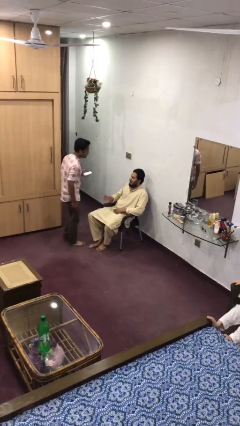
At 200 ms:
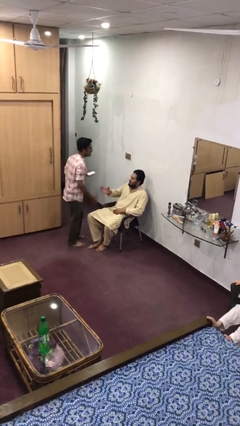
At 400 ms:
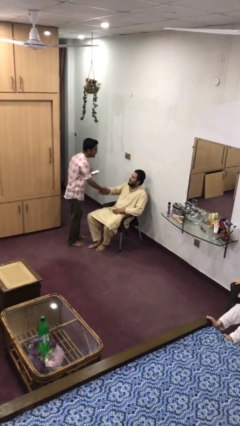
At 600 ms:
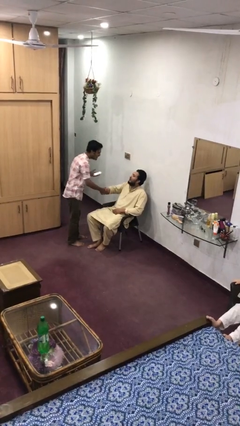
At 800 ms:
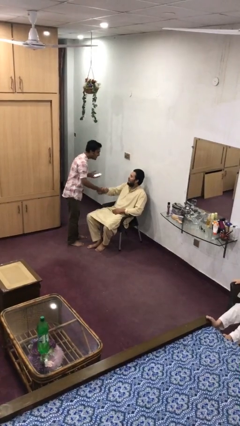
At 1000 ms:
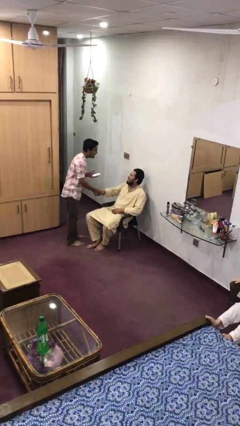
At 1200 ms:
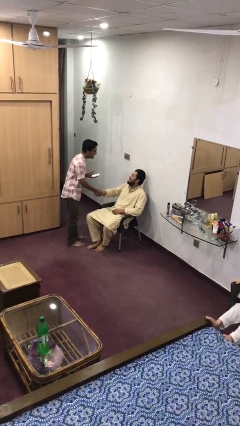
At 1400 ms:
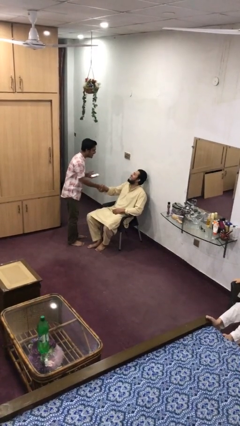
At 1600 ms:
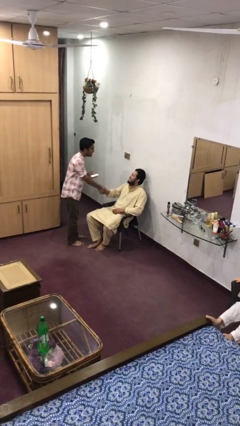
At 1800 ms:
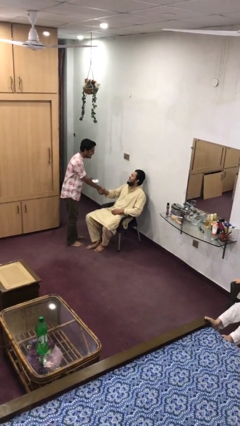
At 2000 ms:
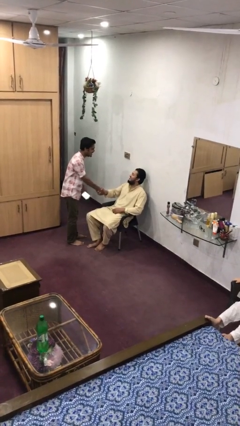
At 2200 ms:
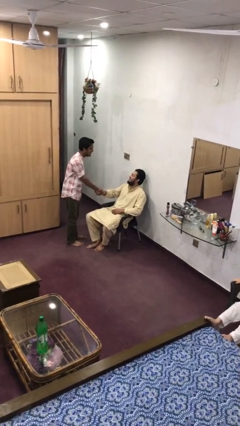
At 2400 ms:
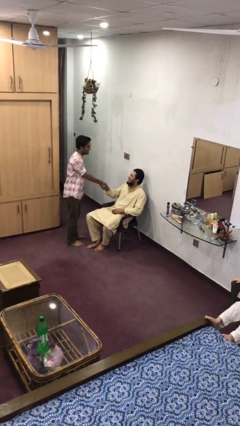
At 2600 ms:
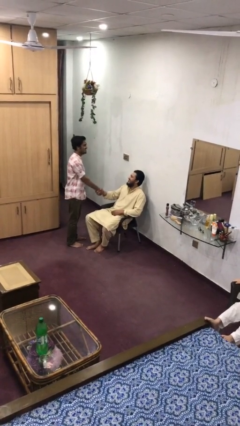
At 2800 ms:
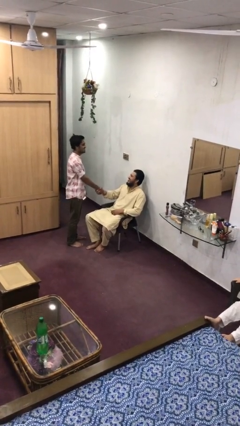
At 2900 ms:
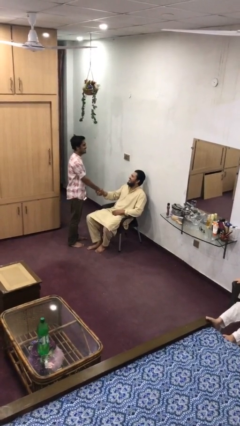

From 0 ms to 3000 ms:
person shakes hand

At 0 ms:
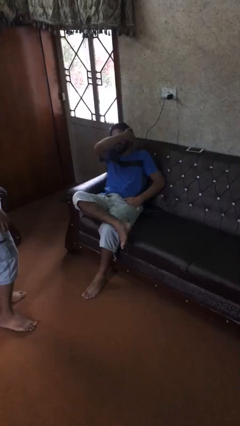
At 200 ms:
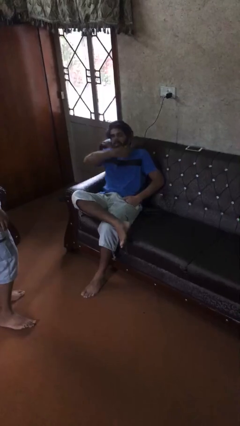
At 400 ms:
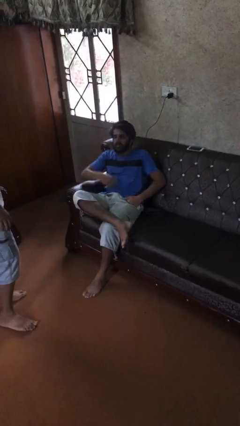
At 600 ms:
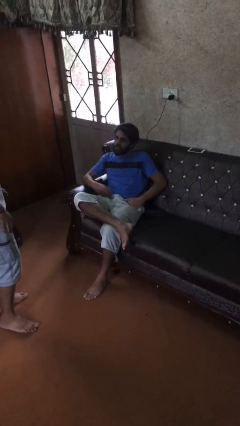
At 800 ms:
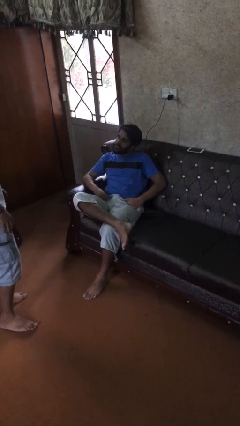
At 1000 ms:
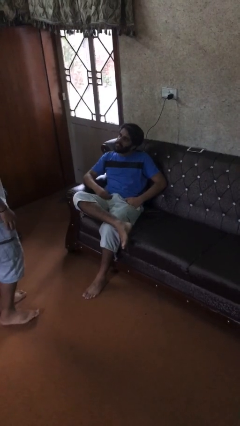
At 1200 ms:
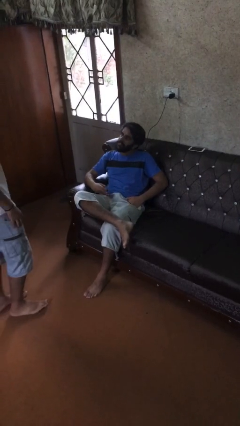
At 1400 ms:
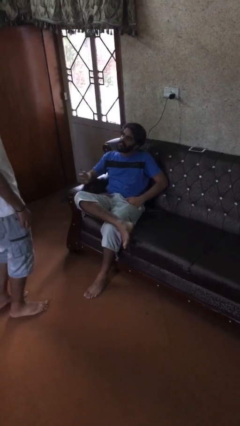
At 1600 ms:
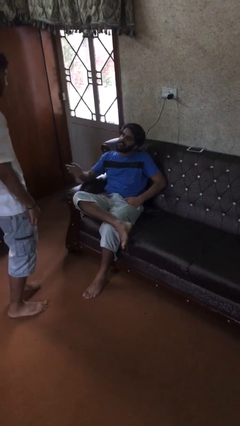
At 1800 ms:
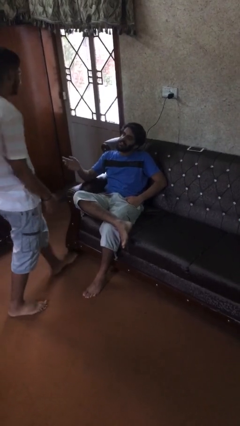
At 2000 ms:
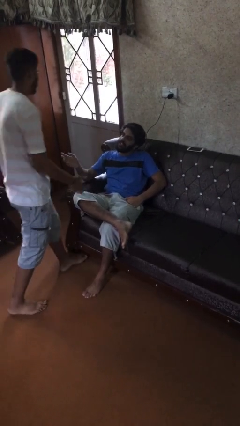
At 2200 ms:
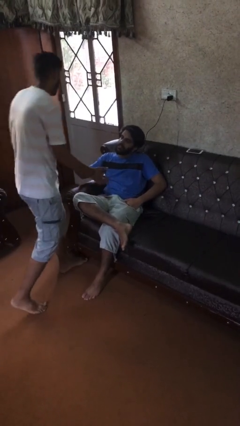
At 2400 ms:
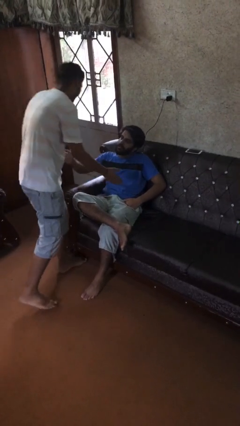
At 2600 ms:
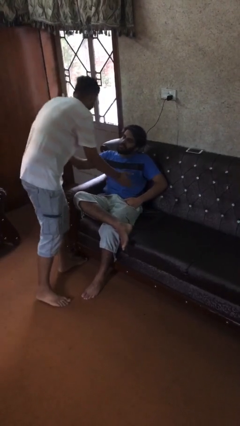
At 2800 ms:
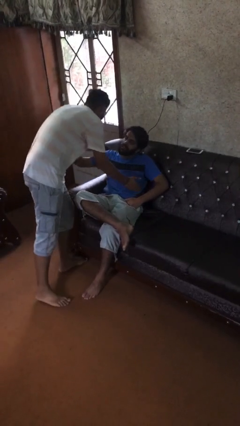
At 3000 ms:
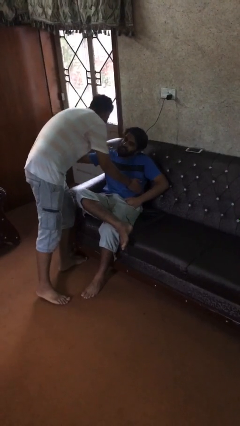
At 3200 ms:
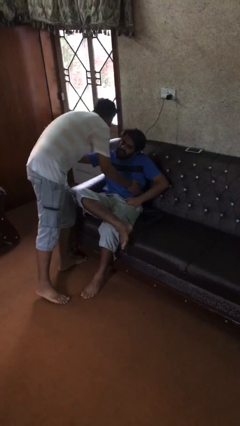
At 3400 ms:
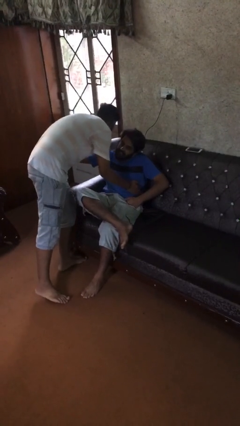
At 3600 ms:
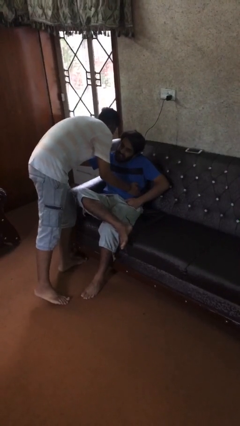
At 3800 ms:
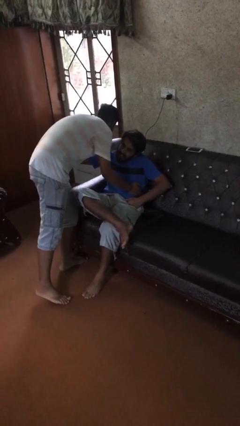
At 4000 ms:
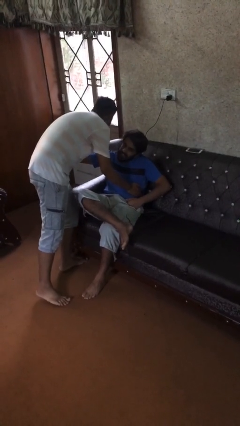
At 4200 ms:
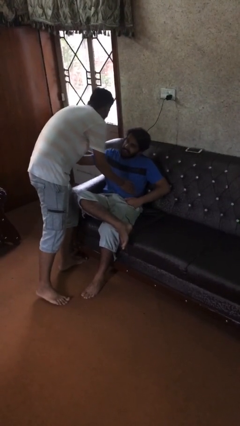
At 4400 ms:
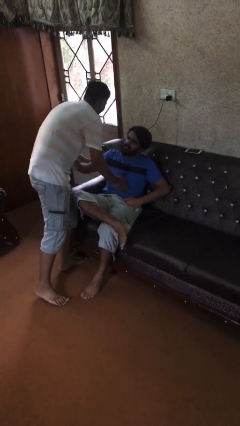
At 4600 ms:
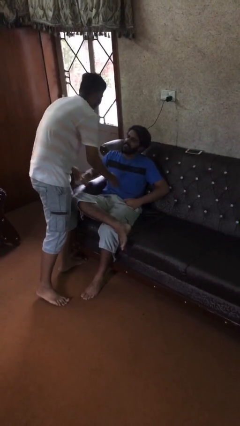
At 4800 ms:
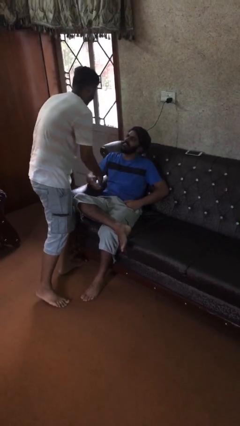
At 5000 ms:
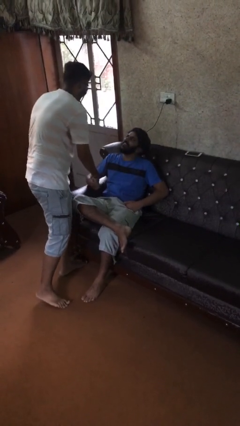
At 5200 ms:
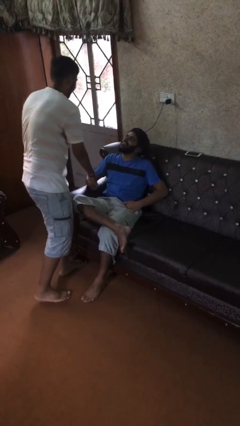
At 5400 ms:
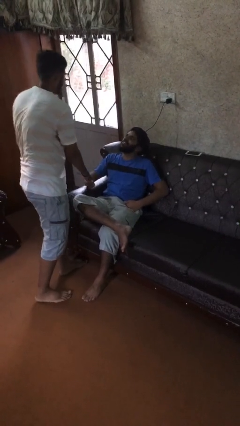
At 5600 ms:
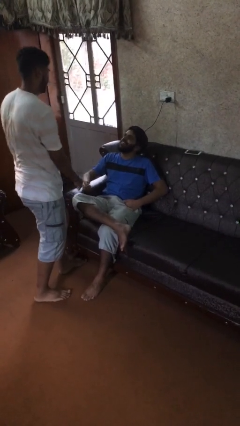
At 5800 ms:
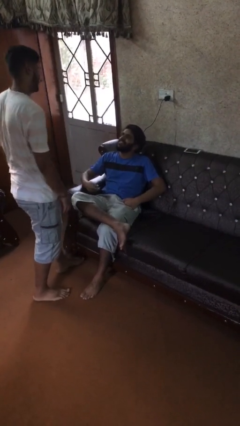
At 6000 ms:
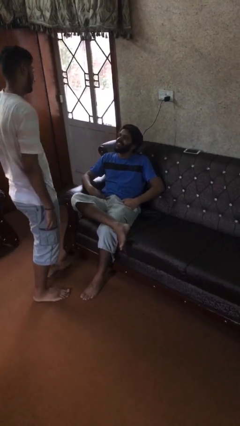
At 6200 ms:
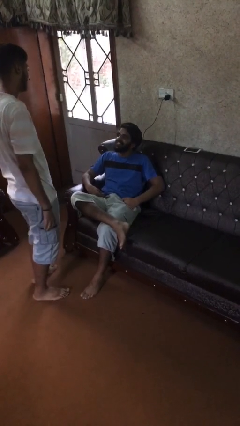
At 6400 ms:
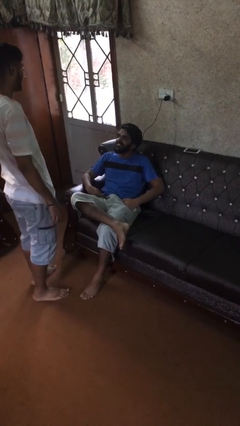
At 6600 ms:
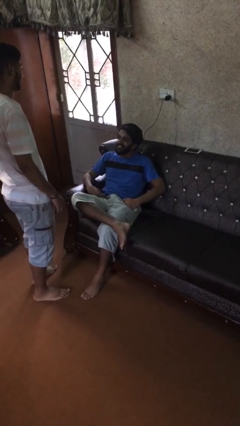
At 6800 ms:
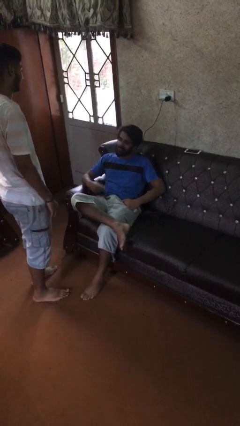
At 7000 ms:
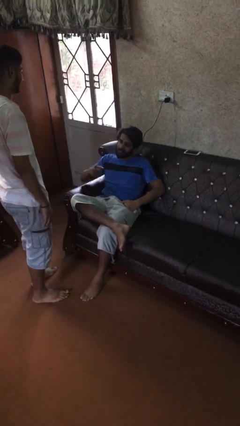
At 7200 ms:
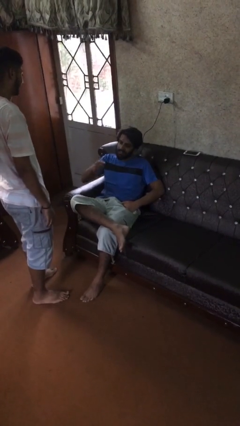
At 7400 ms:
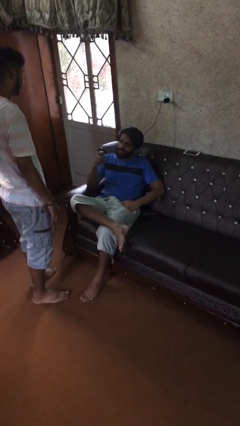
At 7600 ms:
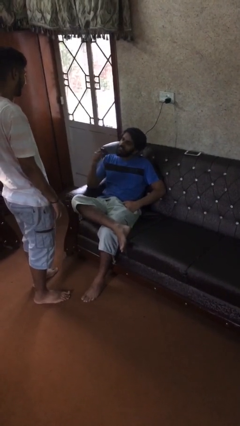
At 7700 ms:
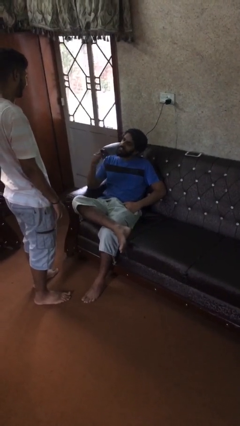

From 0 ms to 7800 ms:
person embraces person

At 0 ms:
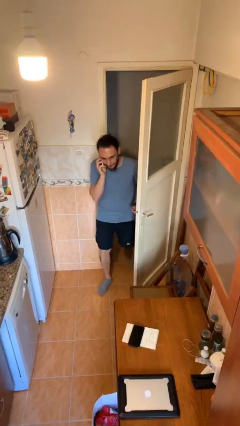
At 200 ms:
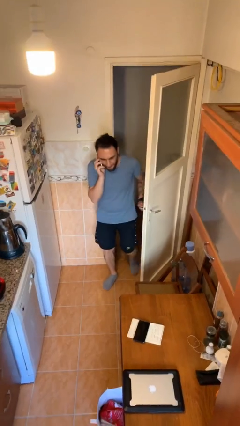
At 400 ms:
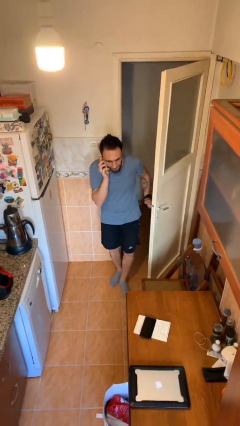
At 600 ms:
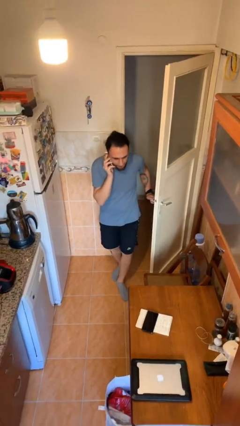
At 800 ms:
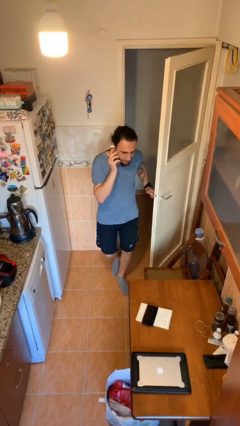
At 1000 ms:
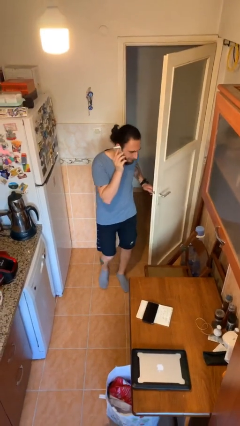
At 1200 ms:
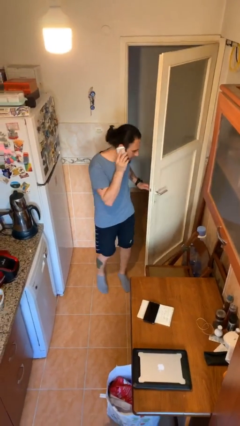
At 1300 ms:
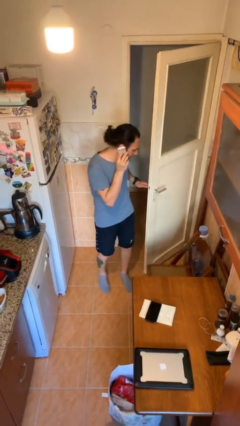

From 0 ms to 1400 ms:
person enters scene through structure

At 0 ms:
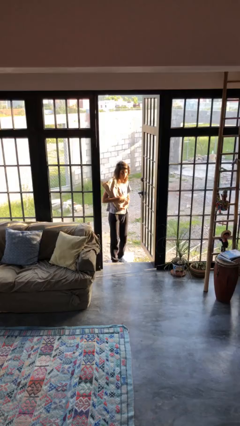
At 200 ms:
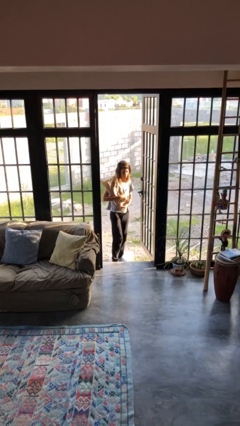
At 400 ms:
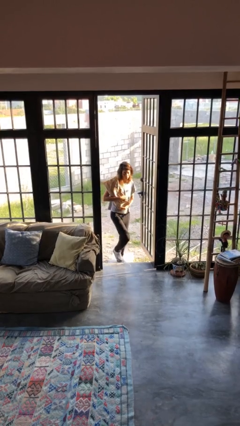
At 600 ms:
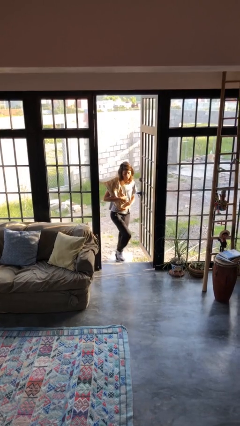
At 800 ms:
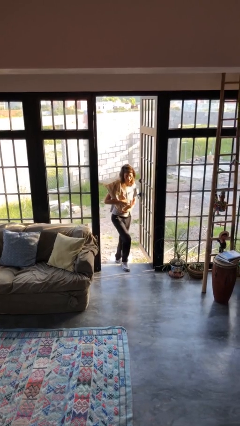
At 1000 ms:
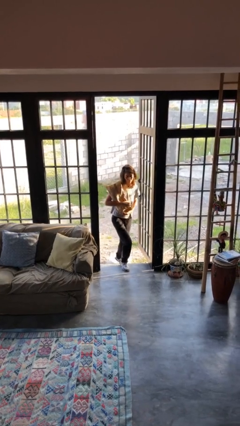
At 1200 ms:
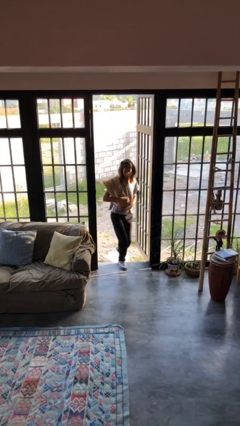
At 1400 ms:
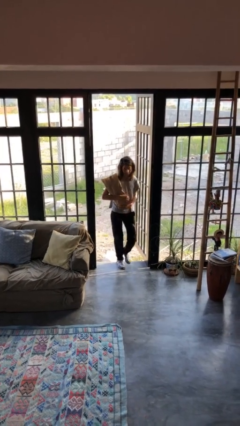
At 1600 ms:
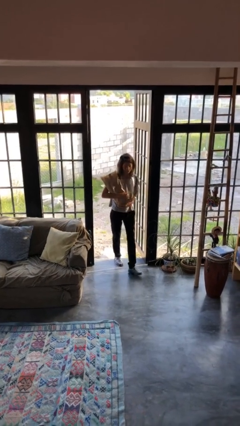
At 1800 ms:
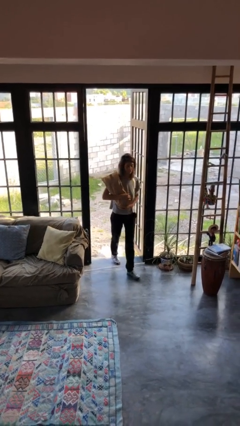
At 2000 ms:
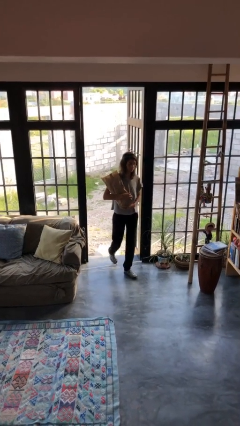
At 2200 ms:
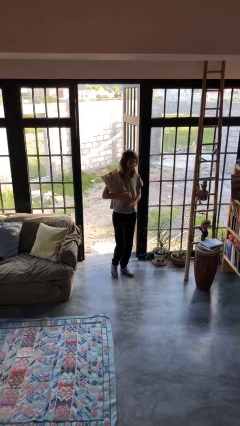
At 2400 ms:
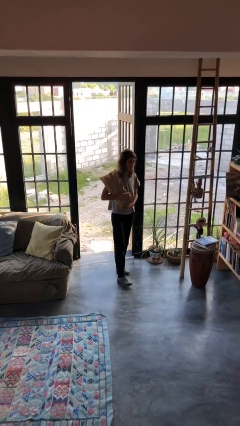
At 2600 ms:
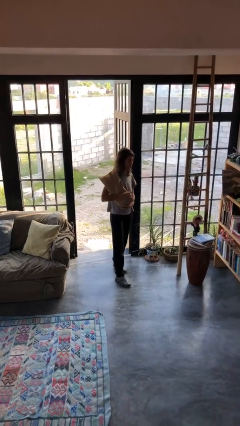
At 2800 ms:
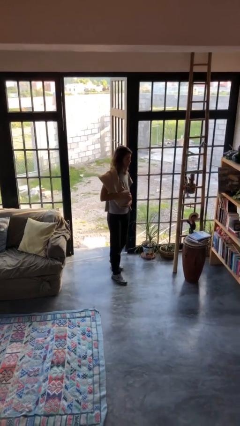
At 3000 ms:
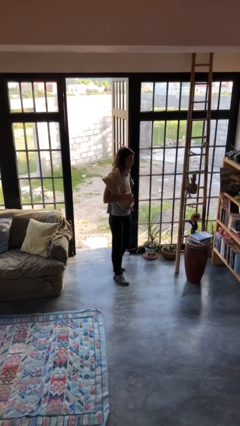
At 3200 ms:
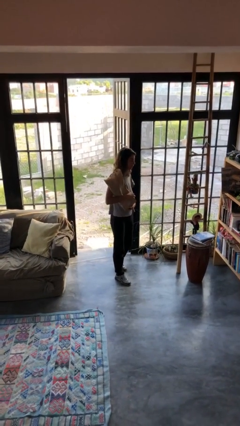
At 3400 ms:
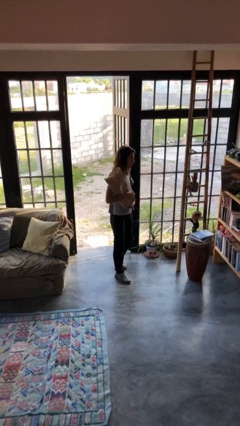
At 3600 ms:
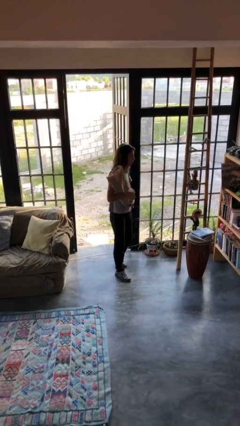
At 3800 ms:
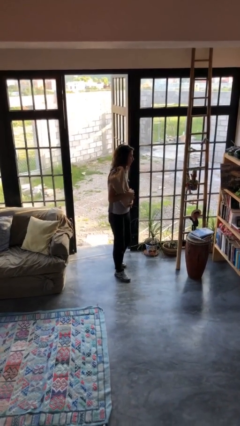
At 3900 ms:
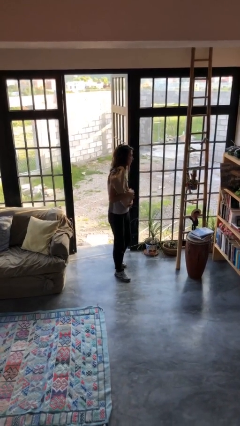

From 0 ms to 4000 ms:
person carries groceries

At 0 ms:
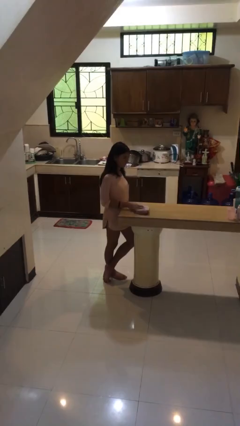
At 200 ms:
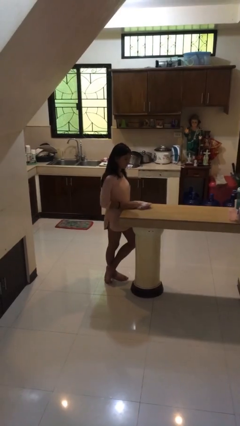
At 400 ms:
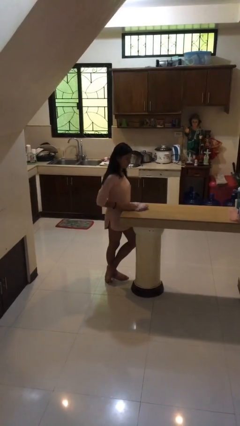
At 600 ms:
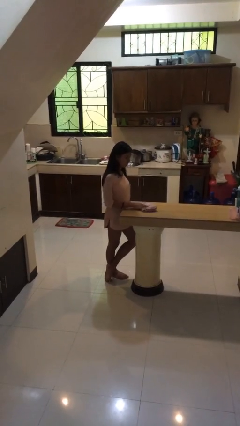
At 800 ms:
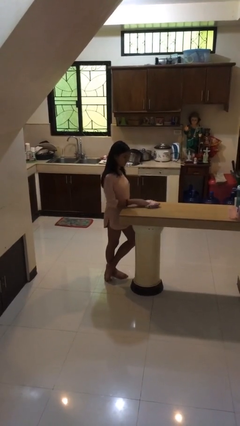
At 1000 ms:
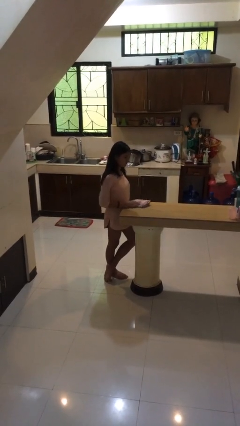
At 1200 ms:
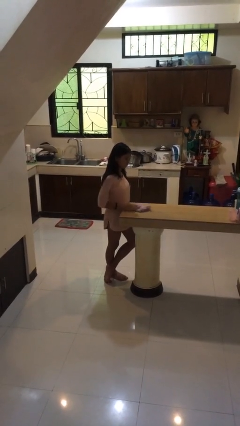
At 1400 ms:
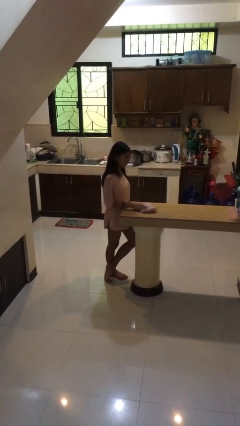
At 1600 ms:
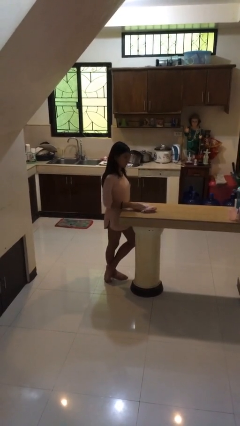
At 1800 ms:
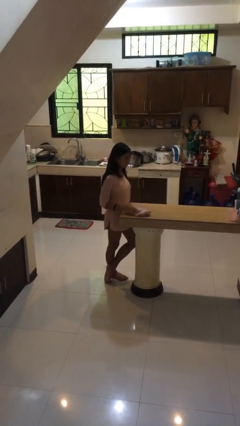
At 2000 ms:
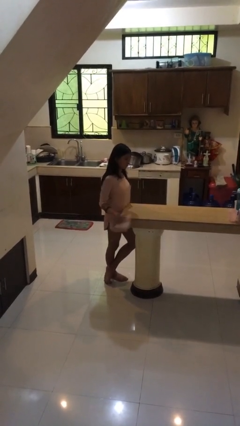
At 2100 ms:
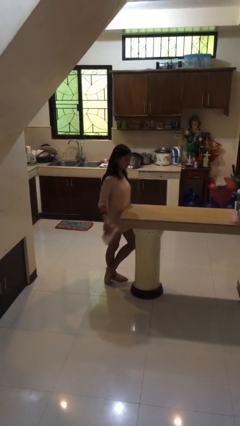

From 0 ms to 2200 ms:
person cleans table with rag
